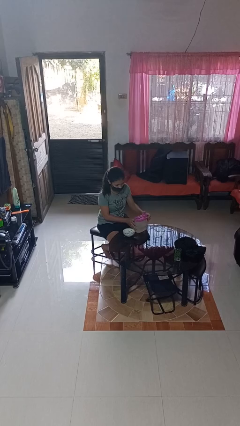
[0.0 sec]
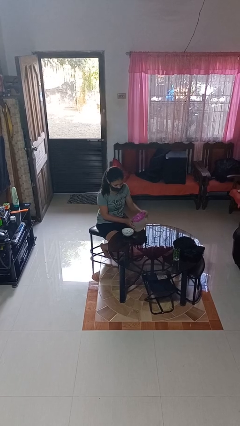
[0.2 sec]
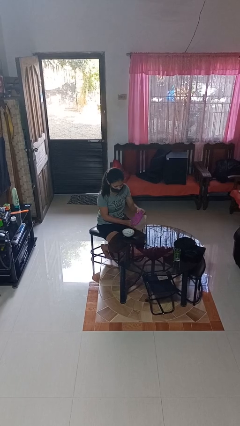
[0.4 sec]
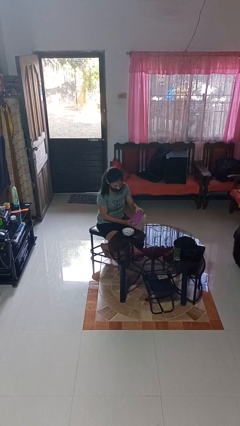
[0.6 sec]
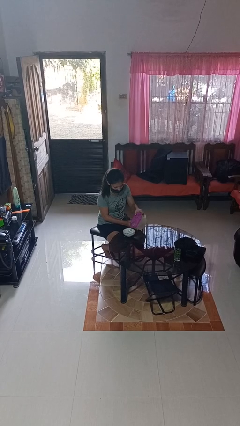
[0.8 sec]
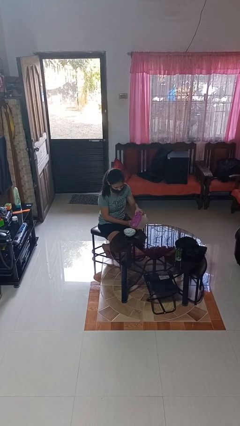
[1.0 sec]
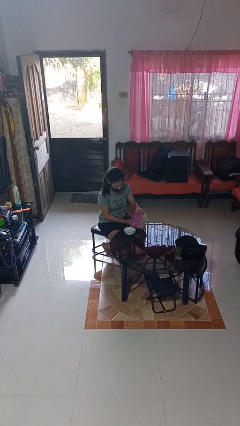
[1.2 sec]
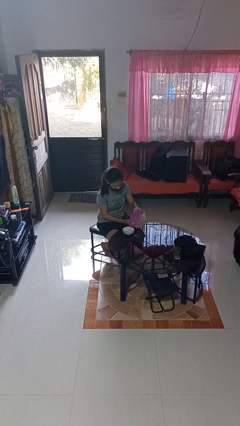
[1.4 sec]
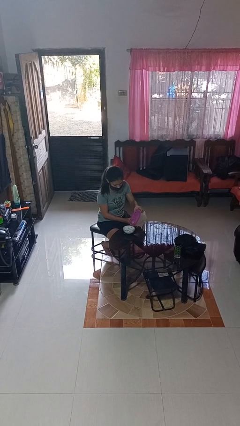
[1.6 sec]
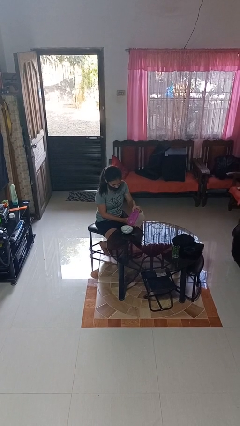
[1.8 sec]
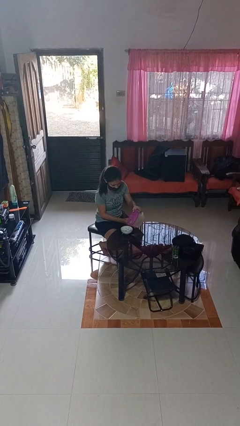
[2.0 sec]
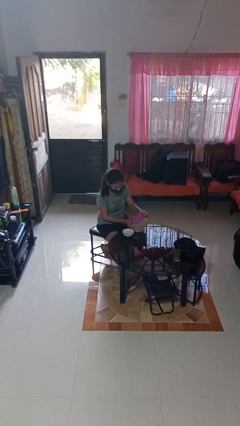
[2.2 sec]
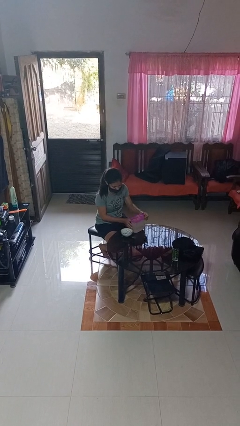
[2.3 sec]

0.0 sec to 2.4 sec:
person pours into bowl

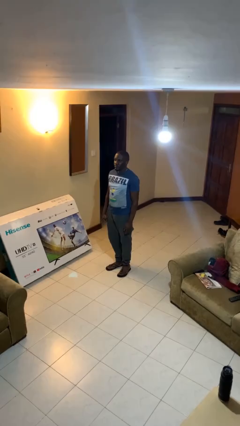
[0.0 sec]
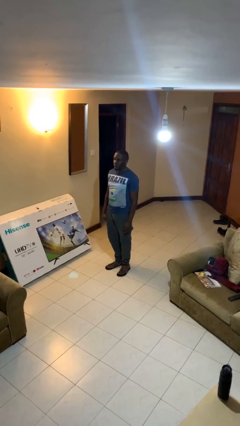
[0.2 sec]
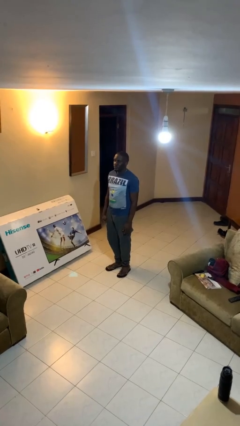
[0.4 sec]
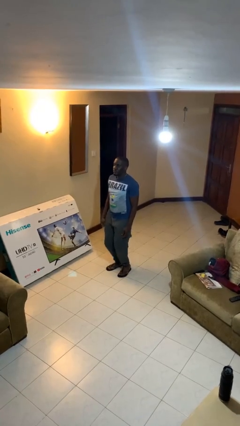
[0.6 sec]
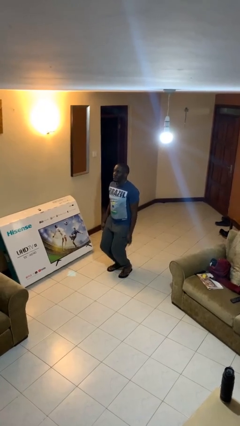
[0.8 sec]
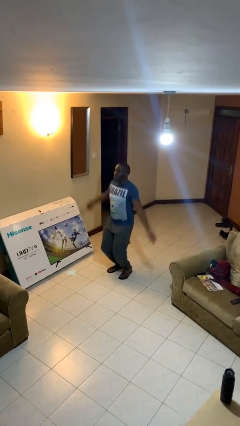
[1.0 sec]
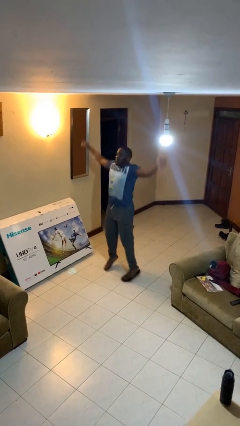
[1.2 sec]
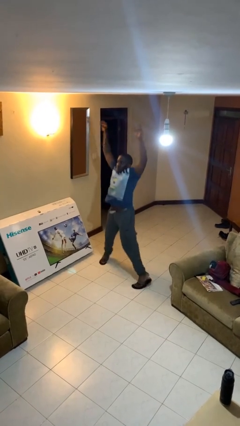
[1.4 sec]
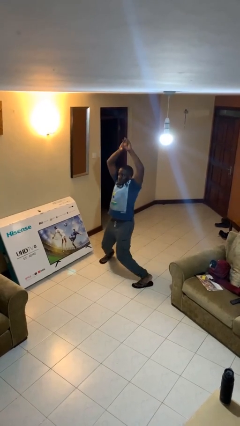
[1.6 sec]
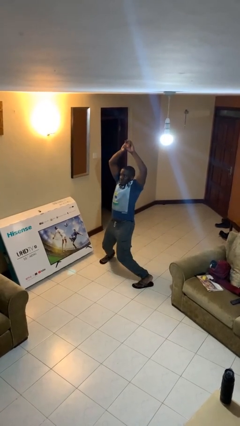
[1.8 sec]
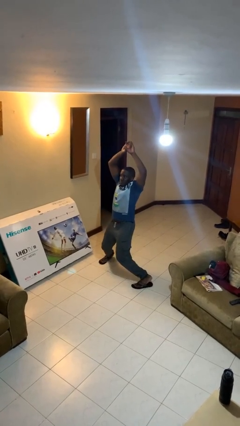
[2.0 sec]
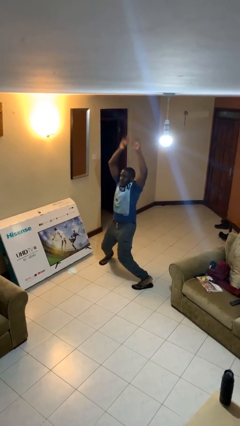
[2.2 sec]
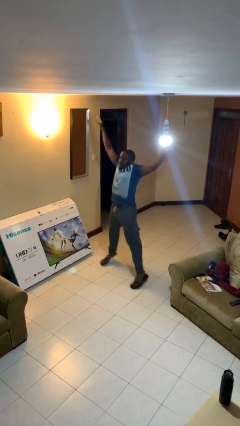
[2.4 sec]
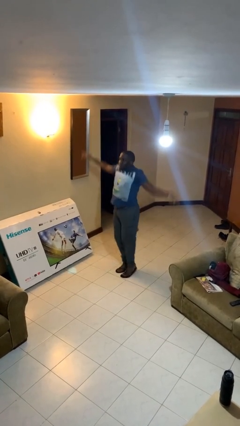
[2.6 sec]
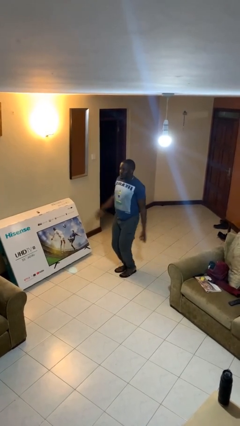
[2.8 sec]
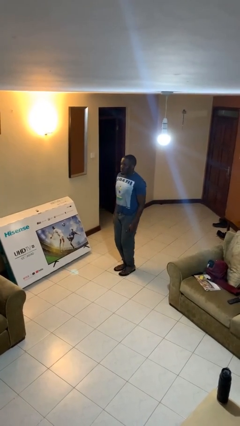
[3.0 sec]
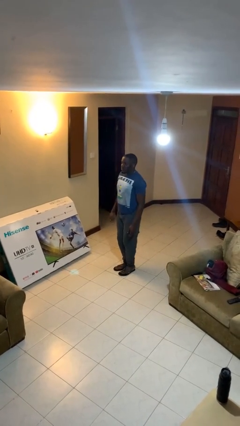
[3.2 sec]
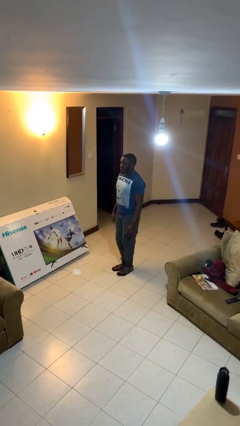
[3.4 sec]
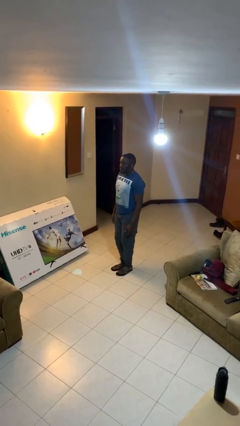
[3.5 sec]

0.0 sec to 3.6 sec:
person exercises with jumping jacks

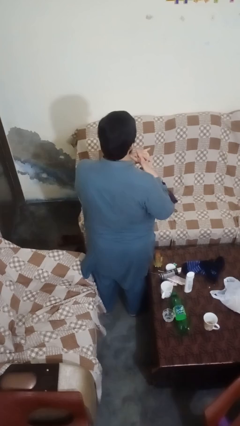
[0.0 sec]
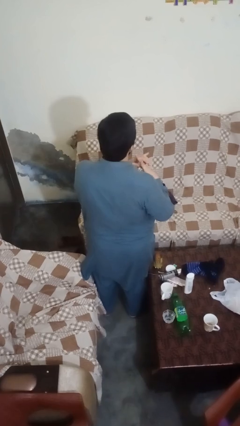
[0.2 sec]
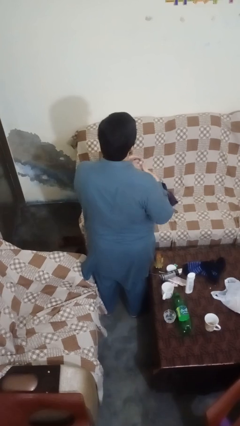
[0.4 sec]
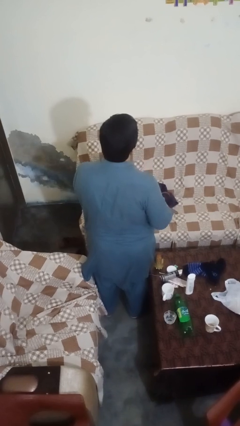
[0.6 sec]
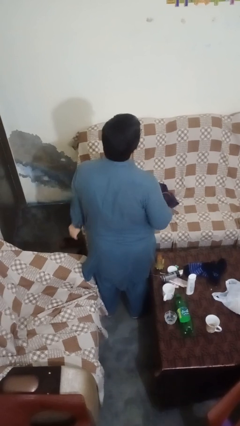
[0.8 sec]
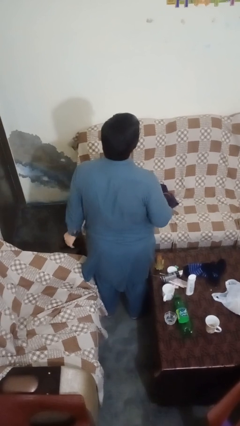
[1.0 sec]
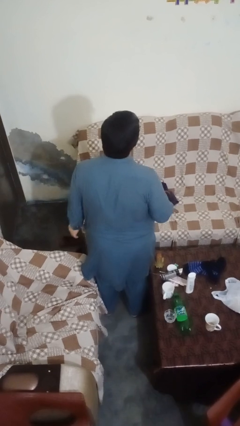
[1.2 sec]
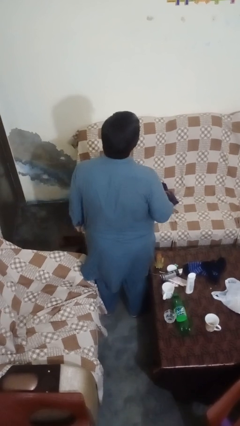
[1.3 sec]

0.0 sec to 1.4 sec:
person takes off ring

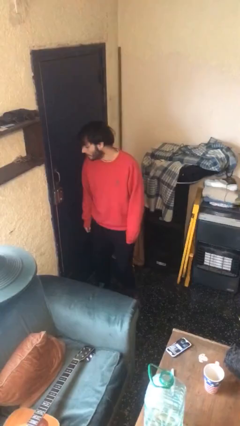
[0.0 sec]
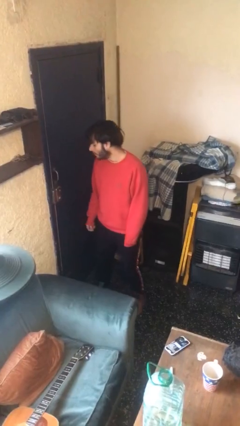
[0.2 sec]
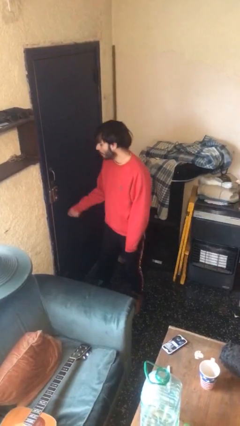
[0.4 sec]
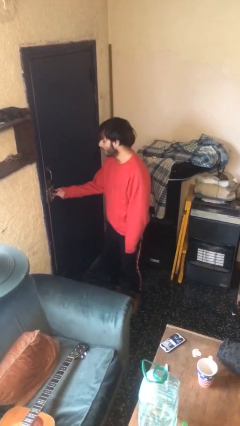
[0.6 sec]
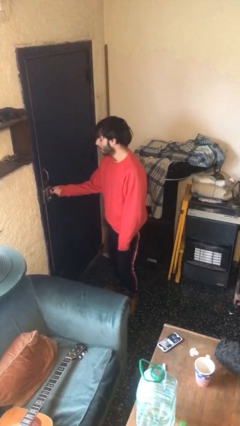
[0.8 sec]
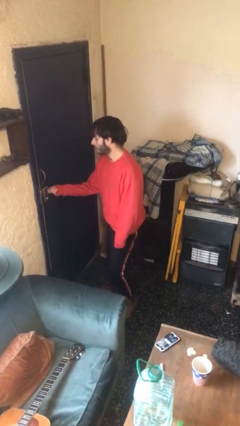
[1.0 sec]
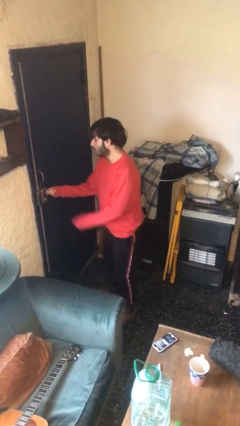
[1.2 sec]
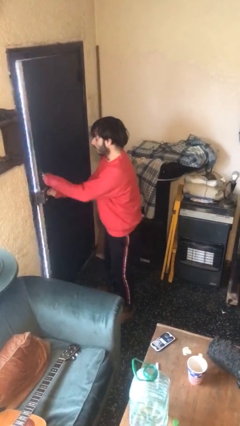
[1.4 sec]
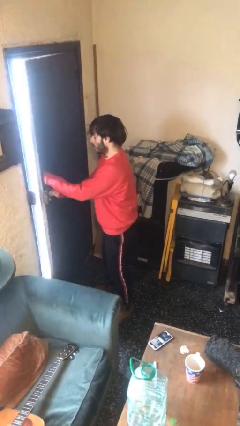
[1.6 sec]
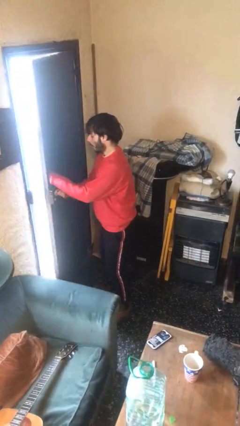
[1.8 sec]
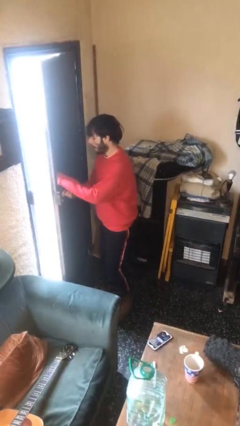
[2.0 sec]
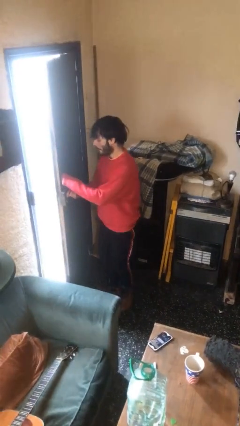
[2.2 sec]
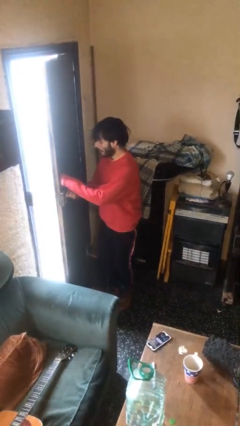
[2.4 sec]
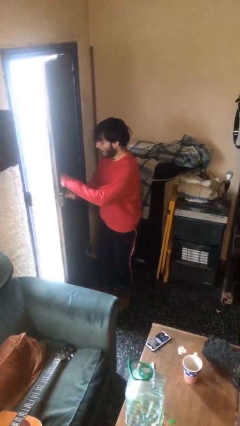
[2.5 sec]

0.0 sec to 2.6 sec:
person opens facility door

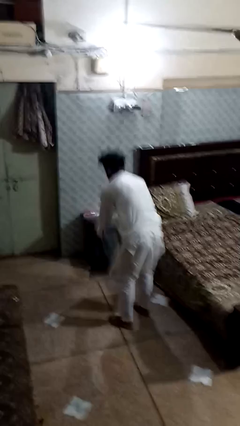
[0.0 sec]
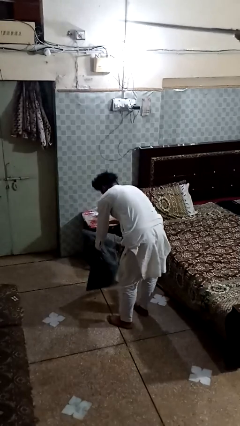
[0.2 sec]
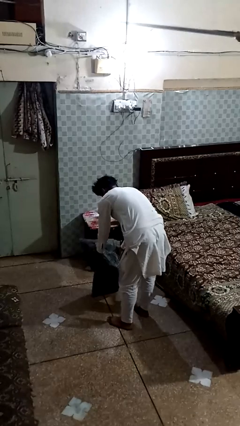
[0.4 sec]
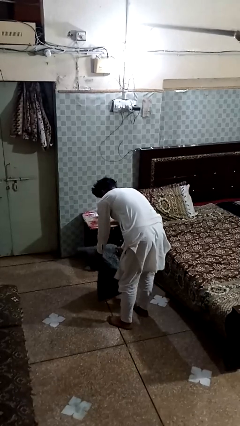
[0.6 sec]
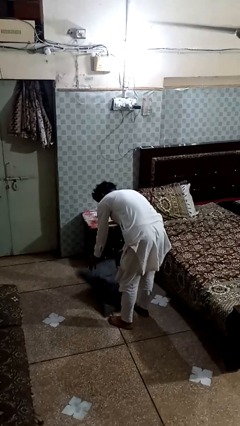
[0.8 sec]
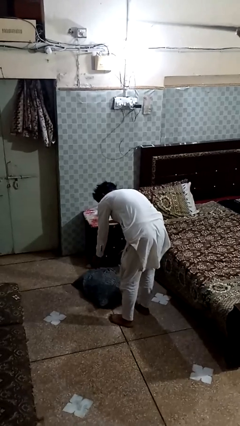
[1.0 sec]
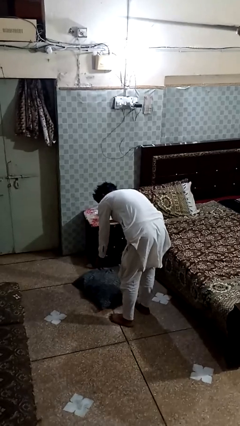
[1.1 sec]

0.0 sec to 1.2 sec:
person catches dropped object

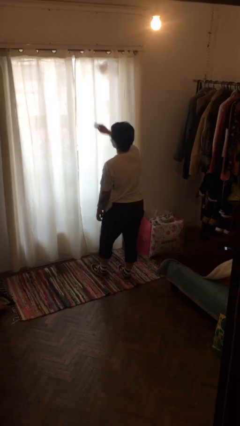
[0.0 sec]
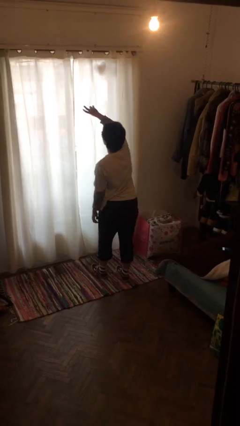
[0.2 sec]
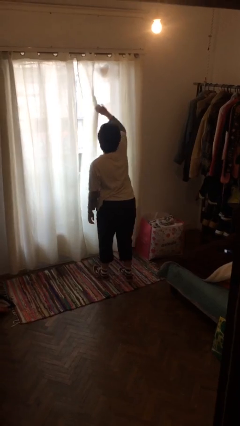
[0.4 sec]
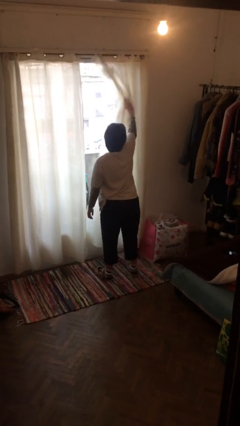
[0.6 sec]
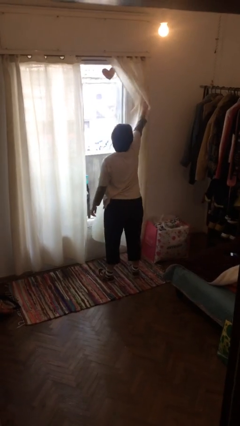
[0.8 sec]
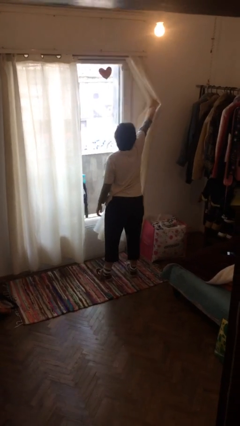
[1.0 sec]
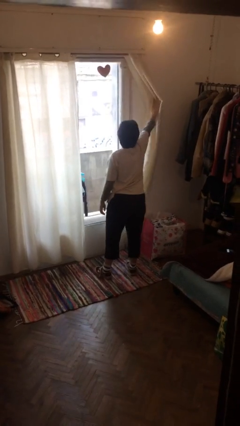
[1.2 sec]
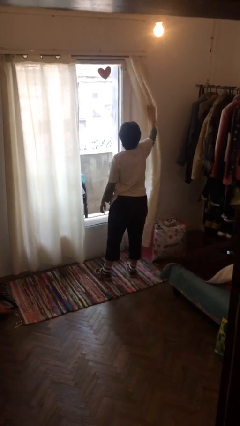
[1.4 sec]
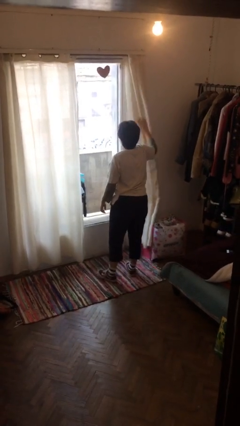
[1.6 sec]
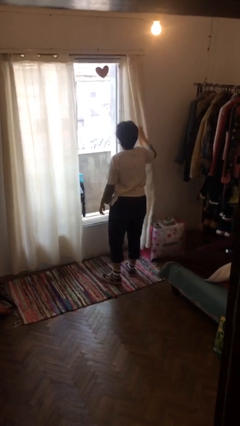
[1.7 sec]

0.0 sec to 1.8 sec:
person opens curtains

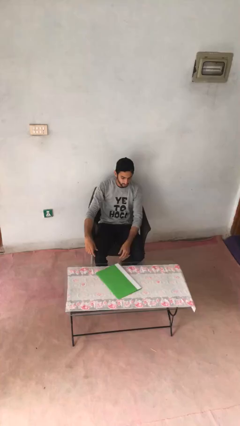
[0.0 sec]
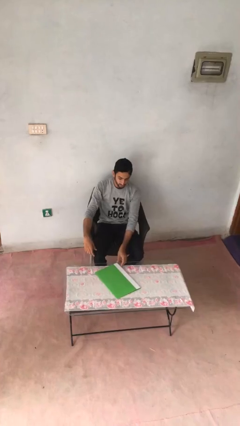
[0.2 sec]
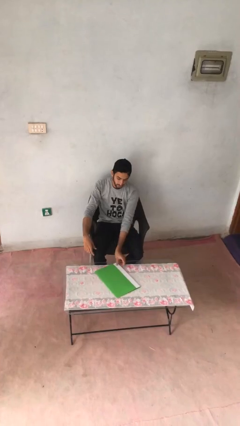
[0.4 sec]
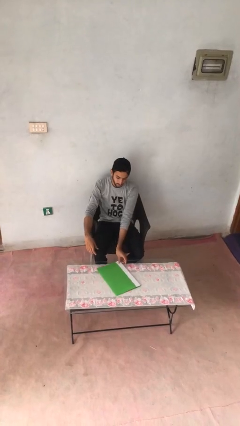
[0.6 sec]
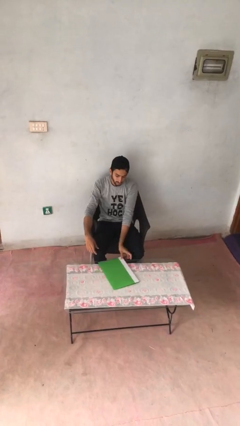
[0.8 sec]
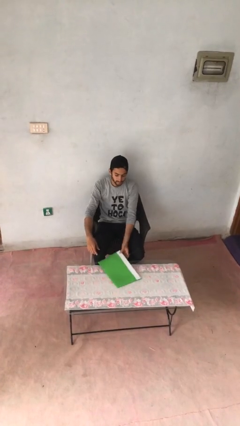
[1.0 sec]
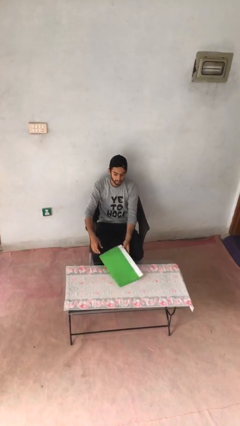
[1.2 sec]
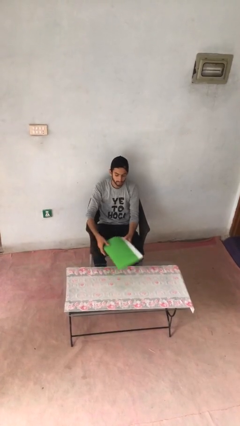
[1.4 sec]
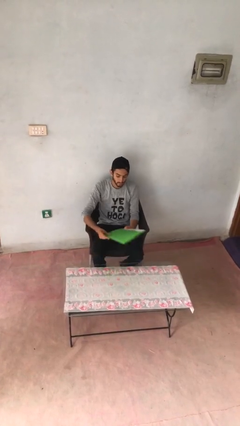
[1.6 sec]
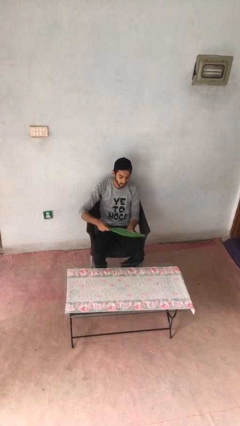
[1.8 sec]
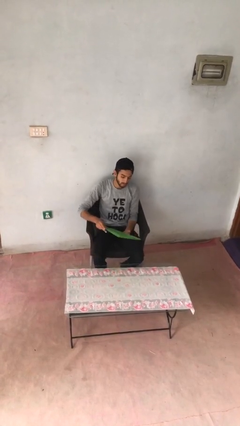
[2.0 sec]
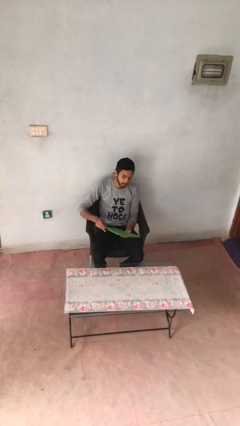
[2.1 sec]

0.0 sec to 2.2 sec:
person picks up object from table

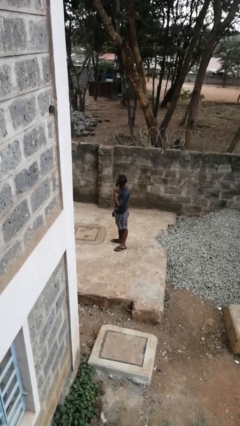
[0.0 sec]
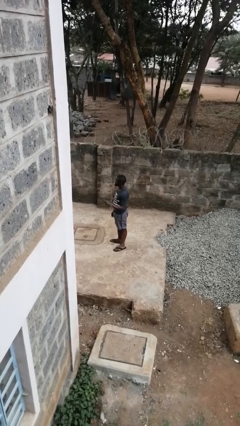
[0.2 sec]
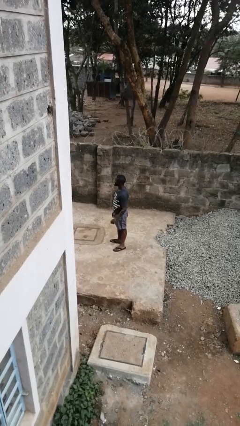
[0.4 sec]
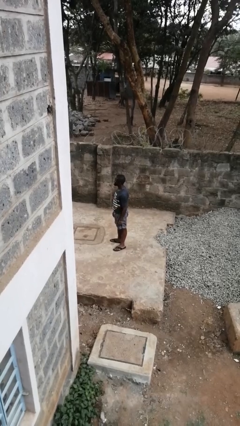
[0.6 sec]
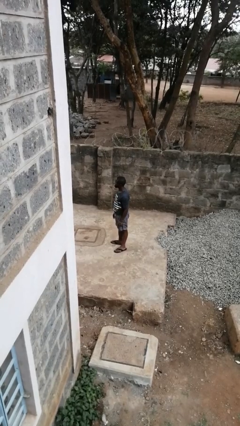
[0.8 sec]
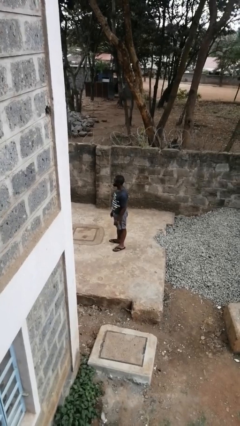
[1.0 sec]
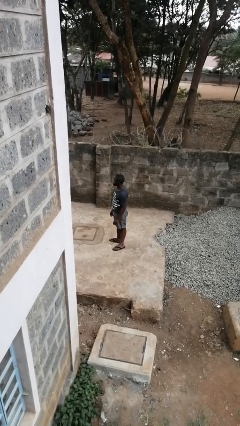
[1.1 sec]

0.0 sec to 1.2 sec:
person gestures listen closely

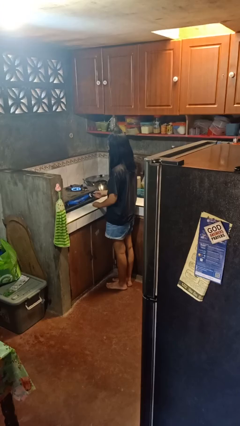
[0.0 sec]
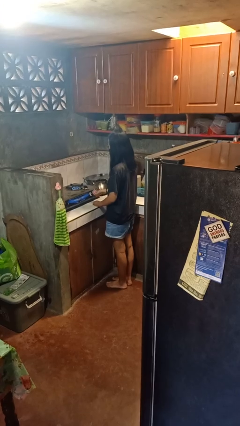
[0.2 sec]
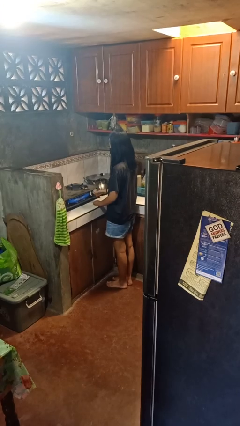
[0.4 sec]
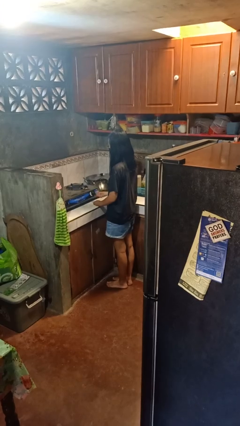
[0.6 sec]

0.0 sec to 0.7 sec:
person turns off stovetop
